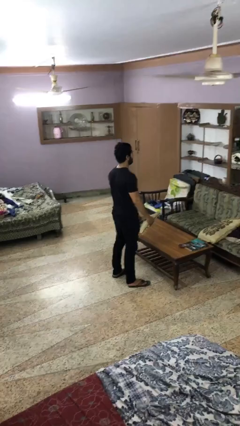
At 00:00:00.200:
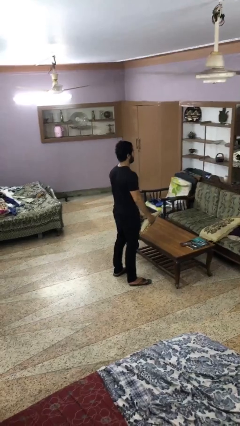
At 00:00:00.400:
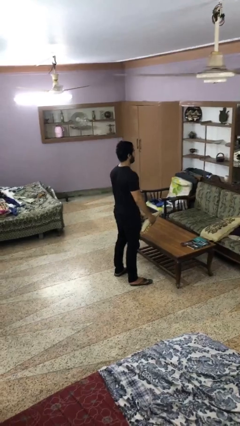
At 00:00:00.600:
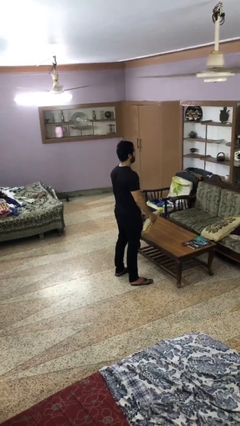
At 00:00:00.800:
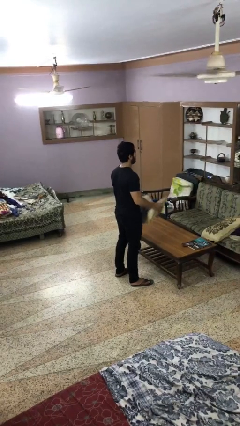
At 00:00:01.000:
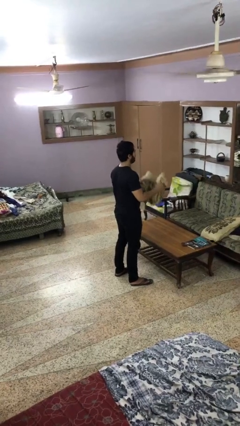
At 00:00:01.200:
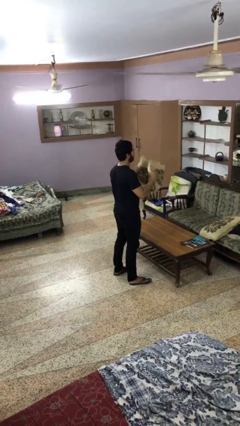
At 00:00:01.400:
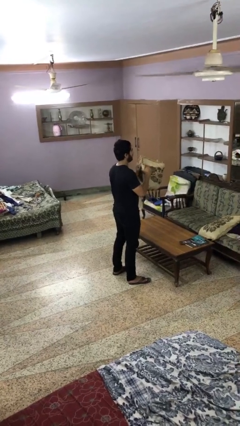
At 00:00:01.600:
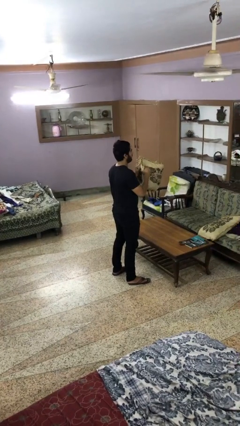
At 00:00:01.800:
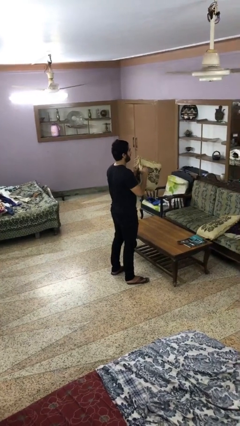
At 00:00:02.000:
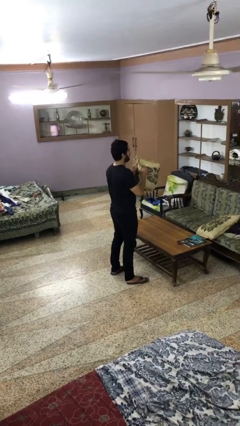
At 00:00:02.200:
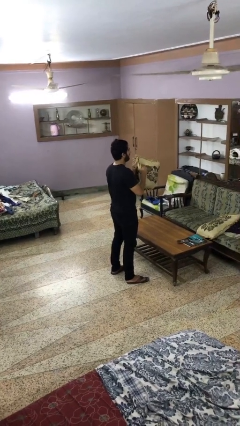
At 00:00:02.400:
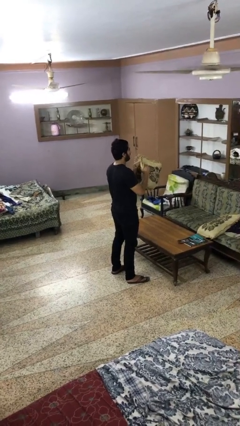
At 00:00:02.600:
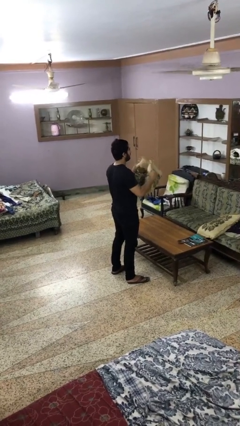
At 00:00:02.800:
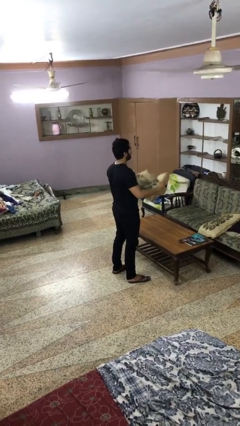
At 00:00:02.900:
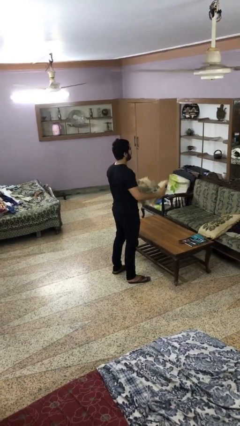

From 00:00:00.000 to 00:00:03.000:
person squeezes object

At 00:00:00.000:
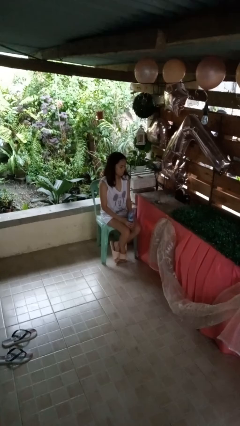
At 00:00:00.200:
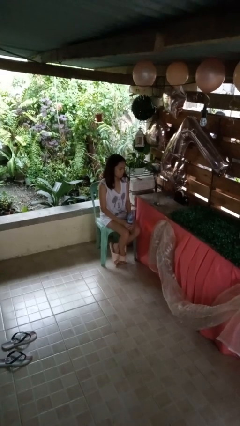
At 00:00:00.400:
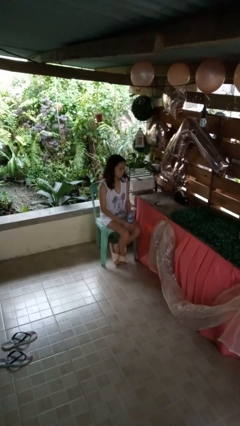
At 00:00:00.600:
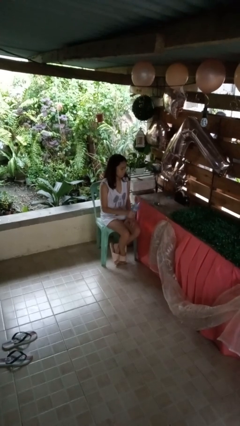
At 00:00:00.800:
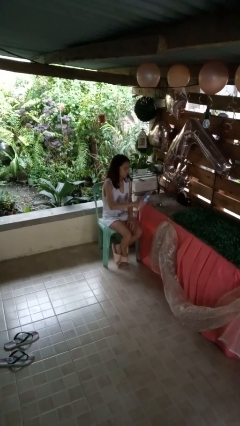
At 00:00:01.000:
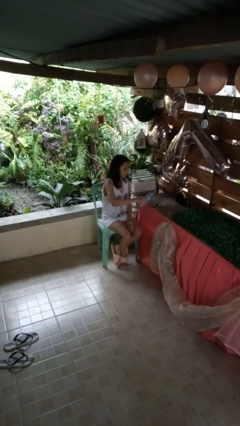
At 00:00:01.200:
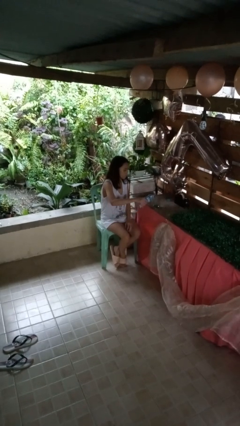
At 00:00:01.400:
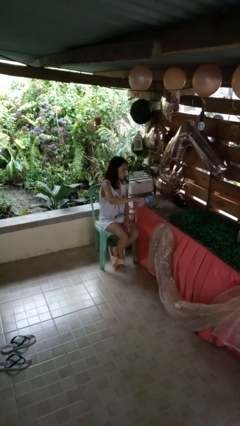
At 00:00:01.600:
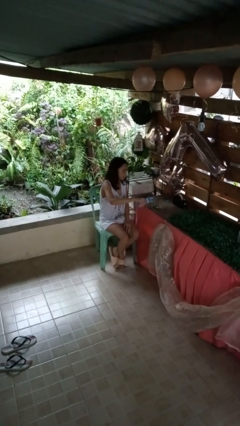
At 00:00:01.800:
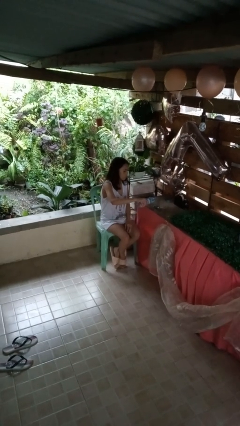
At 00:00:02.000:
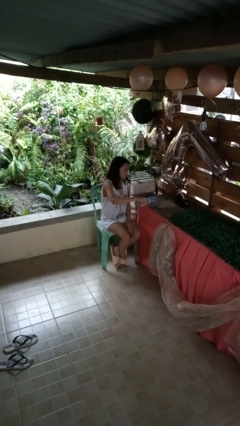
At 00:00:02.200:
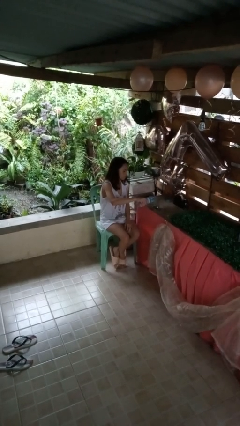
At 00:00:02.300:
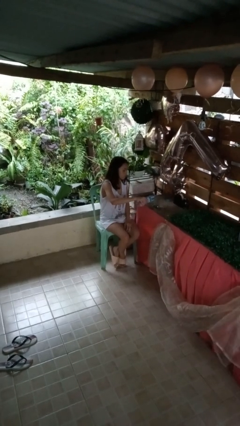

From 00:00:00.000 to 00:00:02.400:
person pours liquid into cup

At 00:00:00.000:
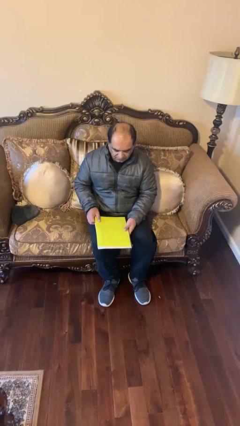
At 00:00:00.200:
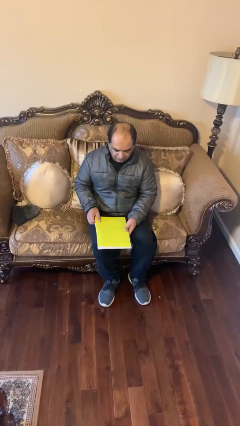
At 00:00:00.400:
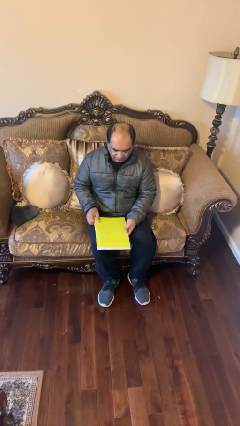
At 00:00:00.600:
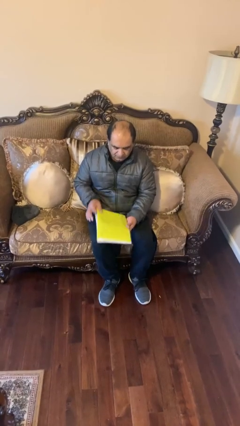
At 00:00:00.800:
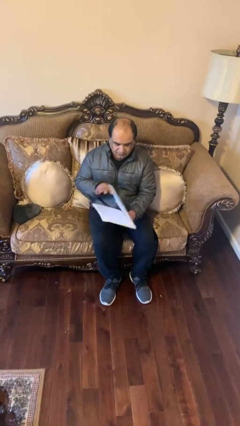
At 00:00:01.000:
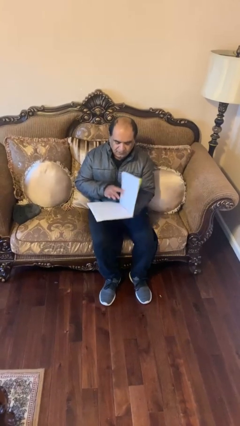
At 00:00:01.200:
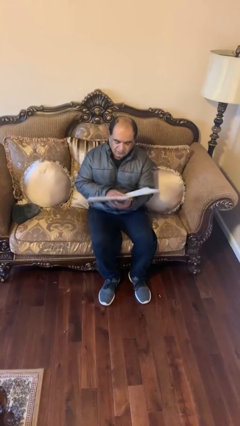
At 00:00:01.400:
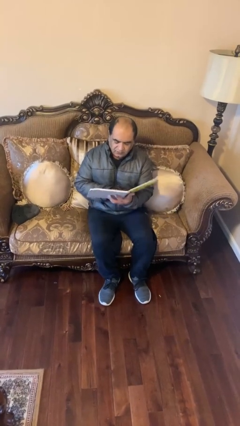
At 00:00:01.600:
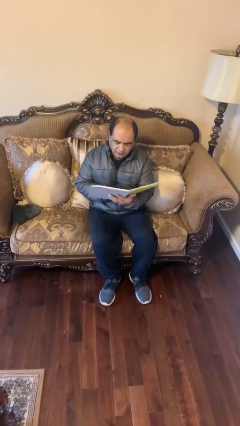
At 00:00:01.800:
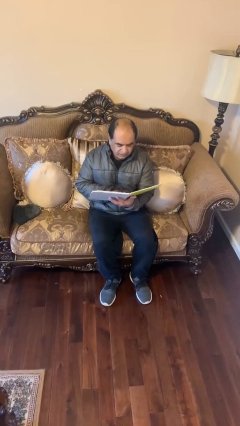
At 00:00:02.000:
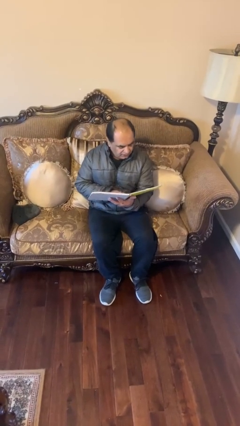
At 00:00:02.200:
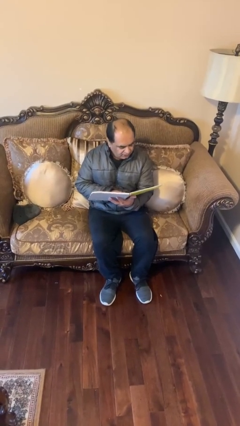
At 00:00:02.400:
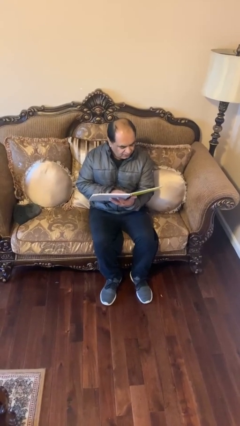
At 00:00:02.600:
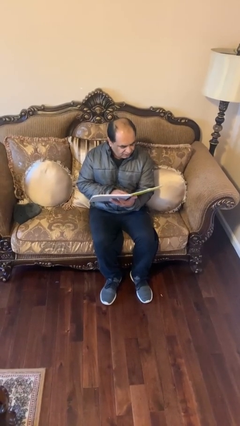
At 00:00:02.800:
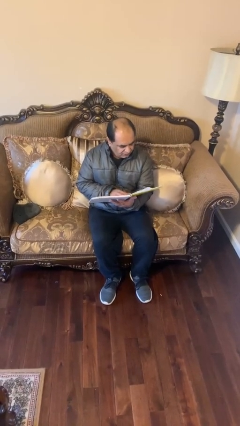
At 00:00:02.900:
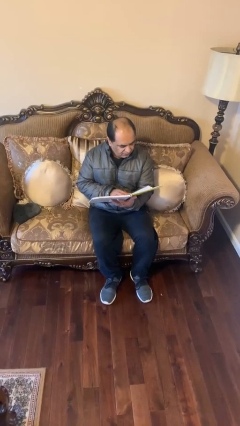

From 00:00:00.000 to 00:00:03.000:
person reads document

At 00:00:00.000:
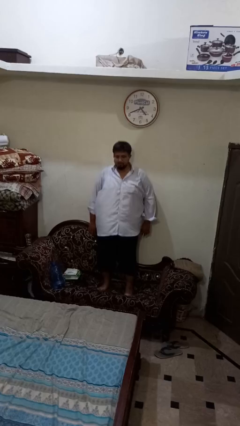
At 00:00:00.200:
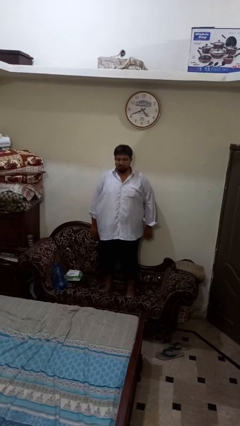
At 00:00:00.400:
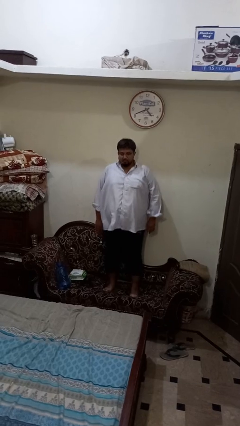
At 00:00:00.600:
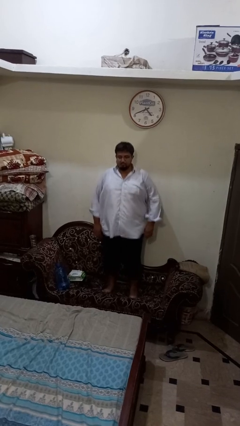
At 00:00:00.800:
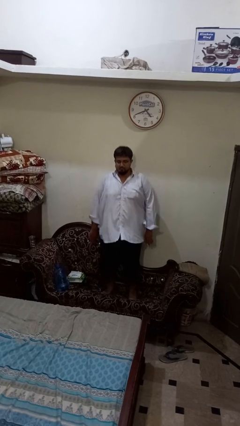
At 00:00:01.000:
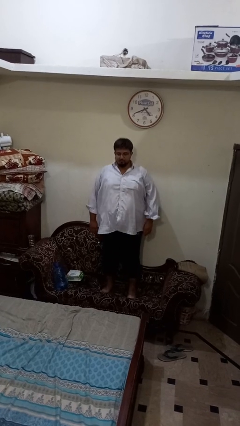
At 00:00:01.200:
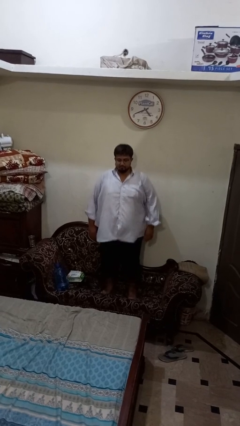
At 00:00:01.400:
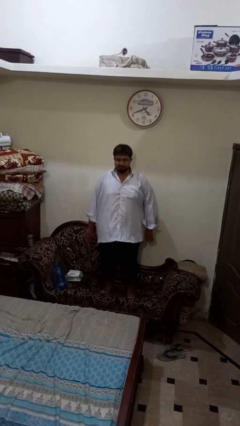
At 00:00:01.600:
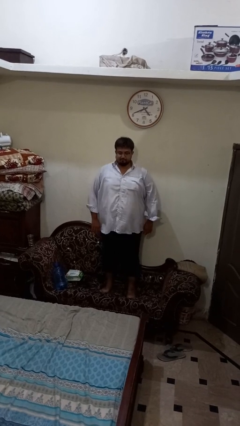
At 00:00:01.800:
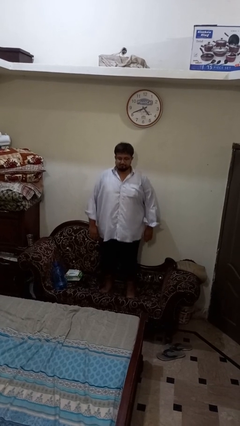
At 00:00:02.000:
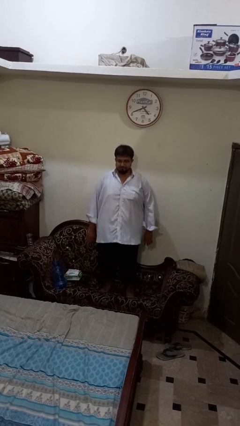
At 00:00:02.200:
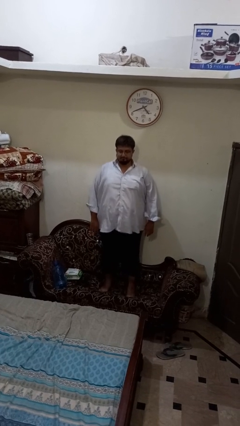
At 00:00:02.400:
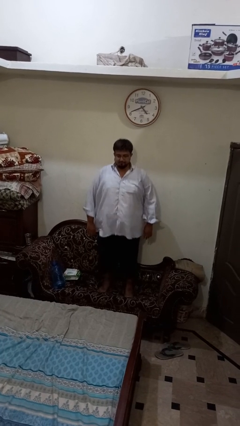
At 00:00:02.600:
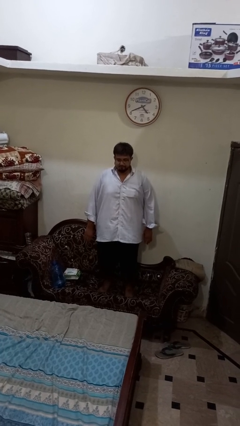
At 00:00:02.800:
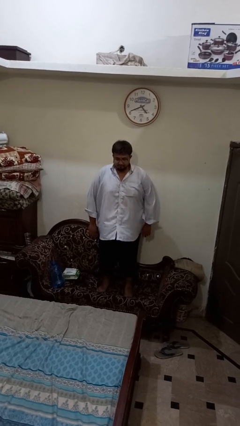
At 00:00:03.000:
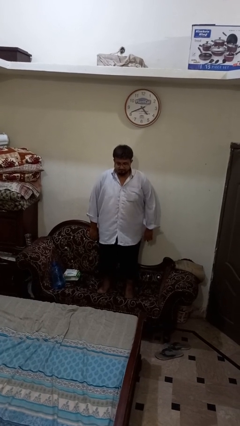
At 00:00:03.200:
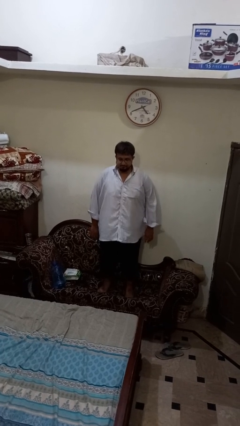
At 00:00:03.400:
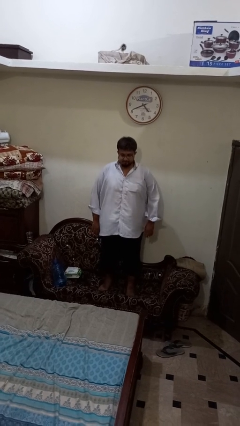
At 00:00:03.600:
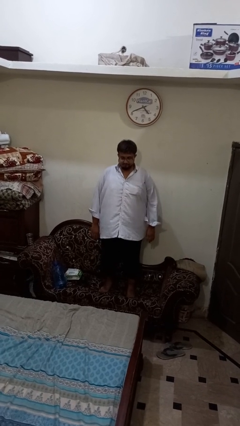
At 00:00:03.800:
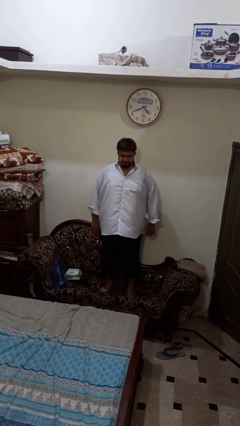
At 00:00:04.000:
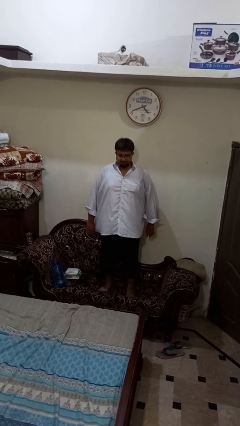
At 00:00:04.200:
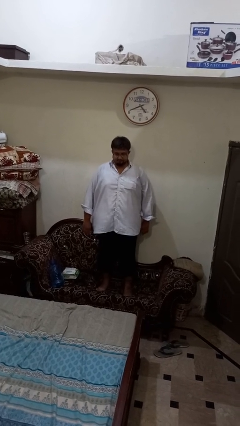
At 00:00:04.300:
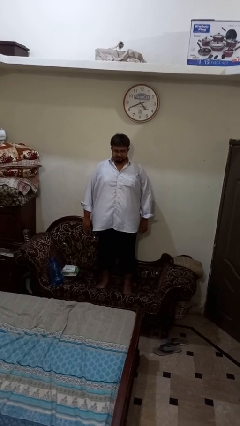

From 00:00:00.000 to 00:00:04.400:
person jumps on couch

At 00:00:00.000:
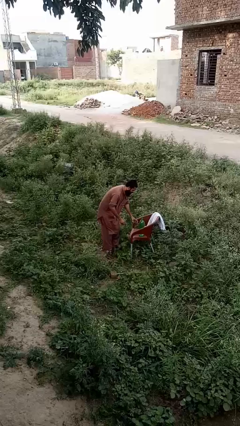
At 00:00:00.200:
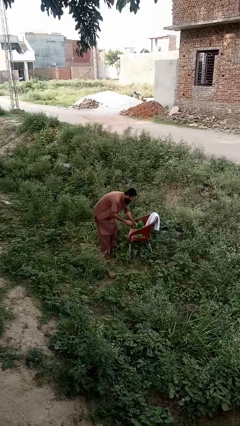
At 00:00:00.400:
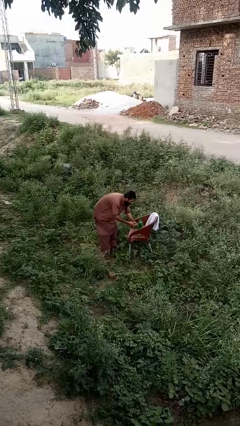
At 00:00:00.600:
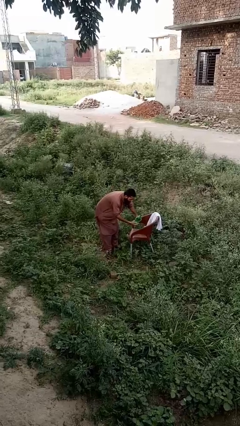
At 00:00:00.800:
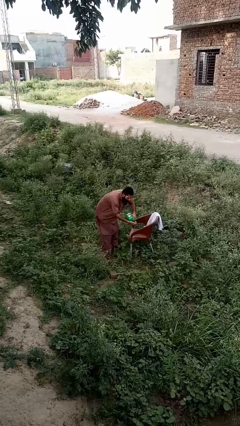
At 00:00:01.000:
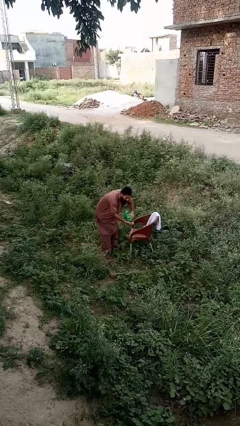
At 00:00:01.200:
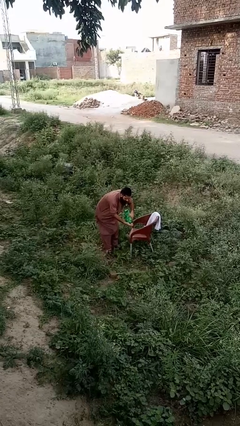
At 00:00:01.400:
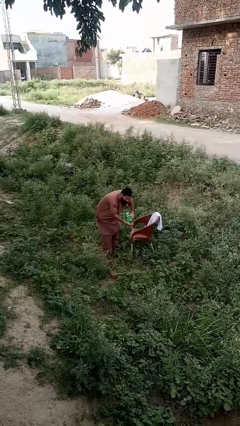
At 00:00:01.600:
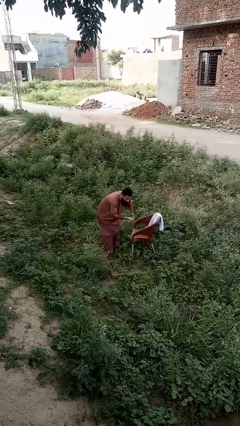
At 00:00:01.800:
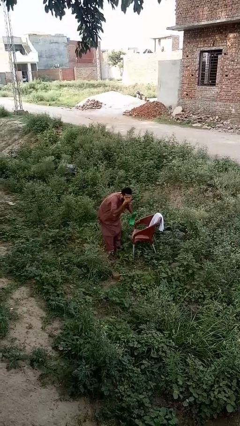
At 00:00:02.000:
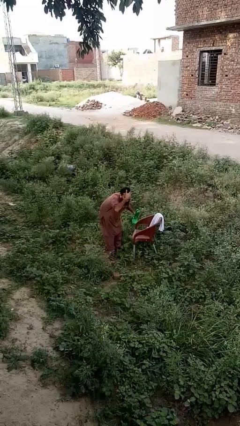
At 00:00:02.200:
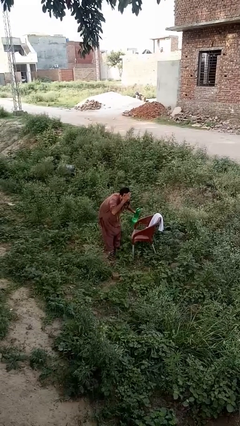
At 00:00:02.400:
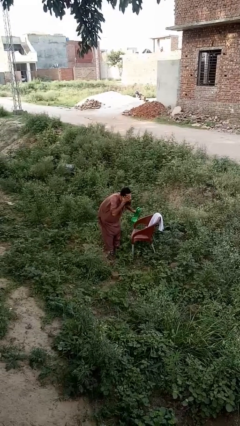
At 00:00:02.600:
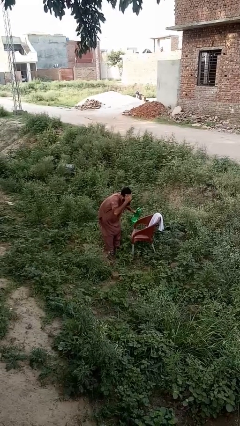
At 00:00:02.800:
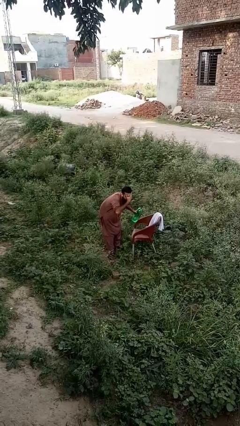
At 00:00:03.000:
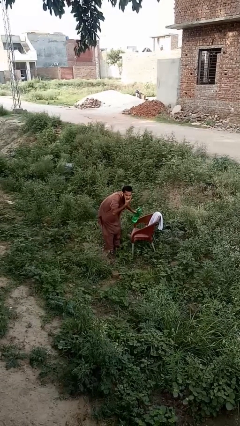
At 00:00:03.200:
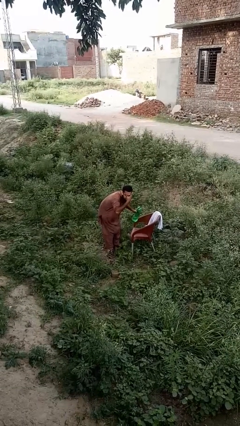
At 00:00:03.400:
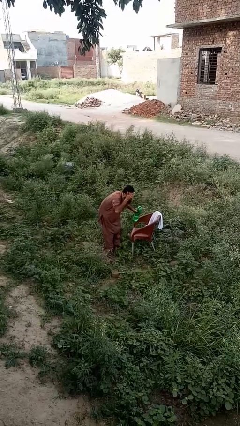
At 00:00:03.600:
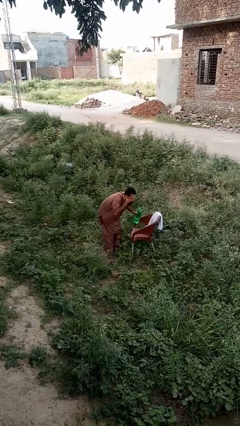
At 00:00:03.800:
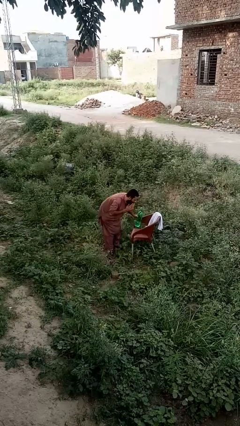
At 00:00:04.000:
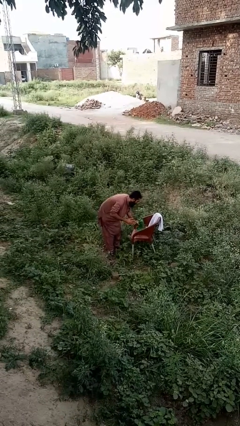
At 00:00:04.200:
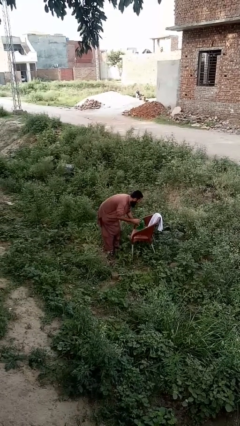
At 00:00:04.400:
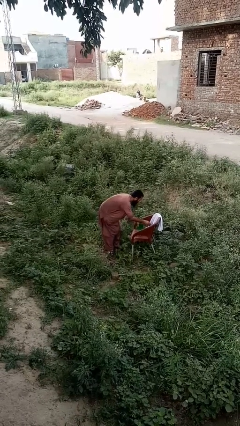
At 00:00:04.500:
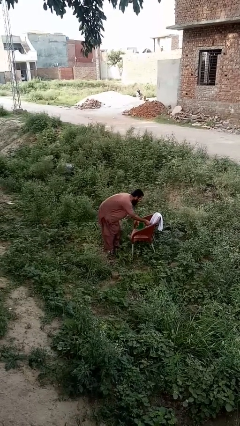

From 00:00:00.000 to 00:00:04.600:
person washes face
